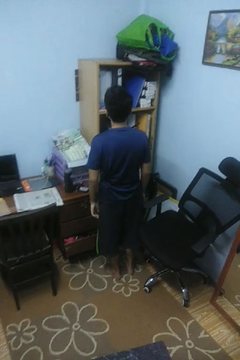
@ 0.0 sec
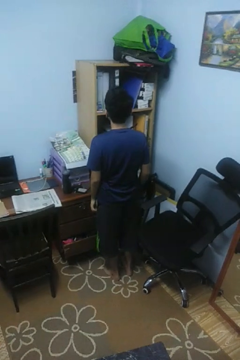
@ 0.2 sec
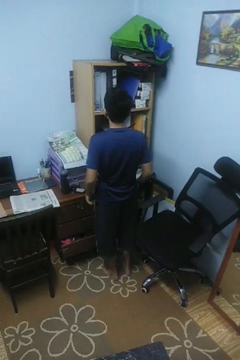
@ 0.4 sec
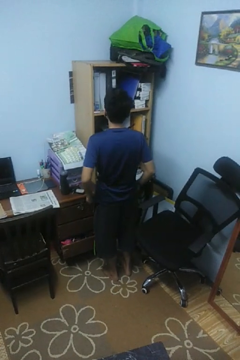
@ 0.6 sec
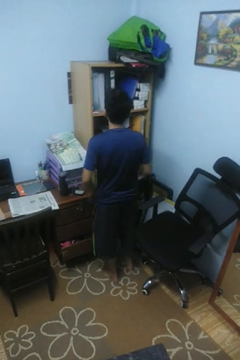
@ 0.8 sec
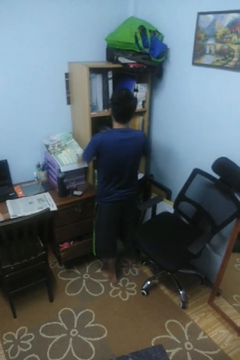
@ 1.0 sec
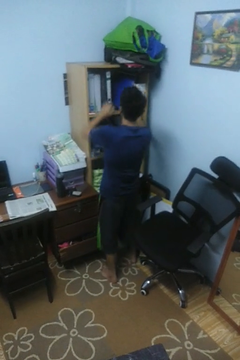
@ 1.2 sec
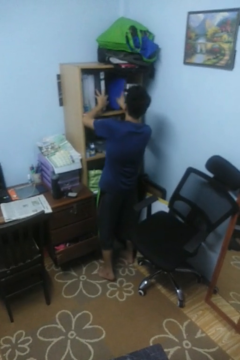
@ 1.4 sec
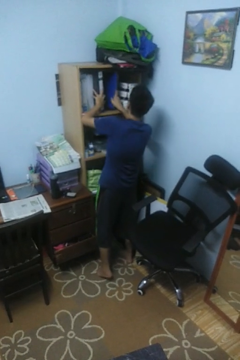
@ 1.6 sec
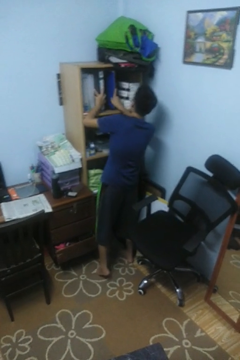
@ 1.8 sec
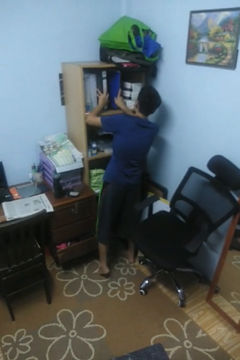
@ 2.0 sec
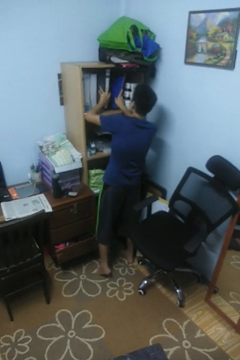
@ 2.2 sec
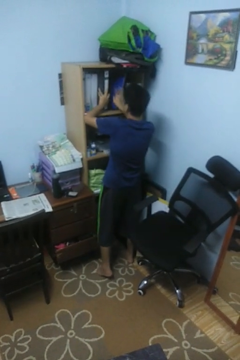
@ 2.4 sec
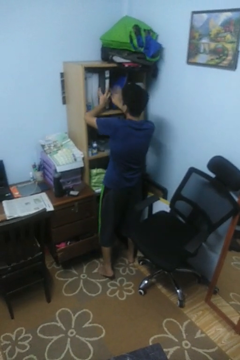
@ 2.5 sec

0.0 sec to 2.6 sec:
person searches in cabinet

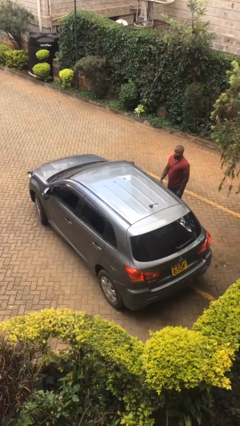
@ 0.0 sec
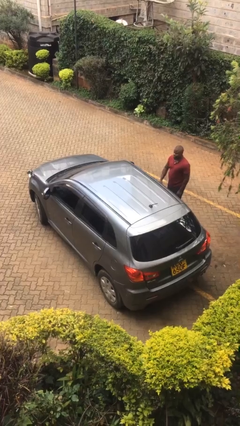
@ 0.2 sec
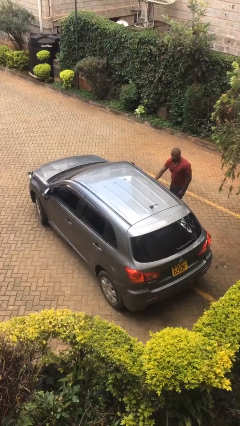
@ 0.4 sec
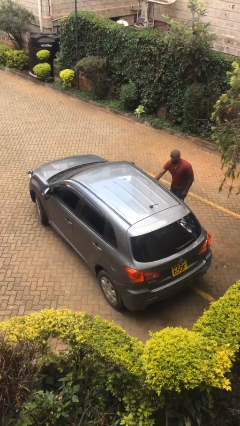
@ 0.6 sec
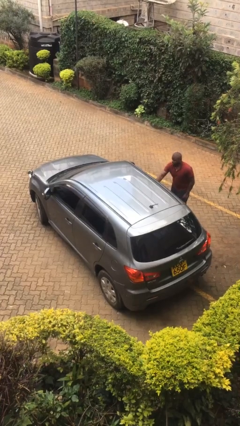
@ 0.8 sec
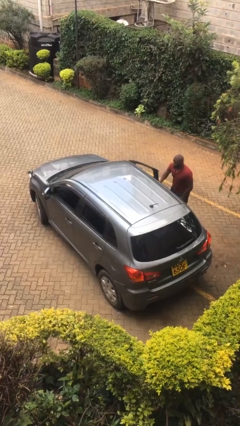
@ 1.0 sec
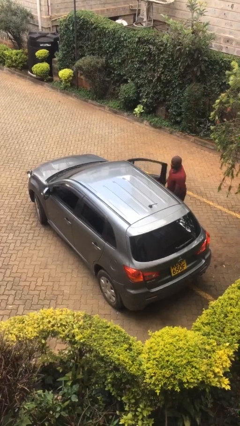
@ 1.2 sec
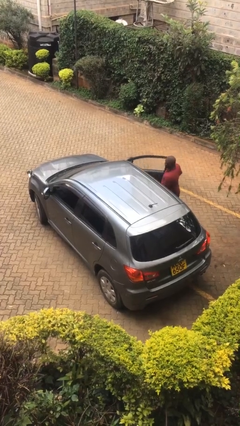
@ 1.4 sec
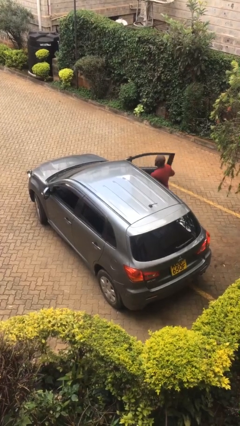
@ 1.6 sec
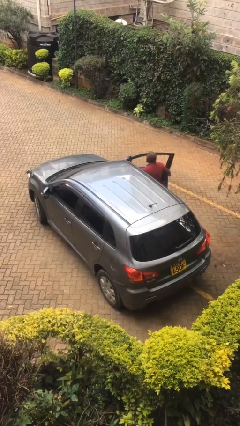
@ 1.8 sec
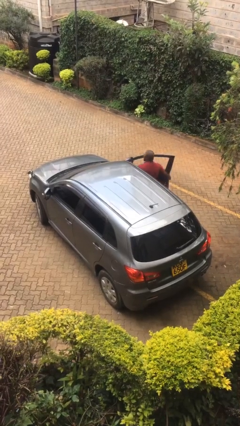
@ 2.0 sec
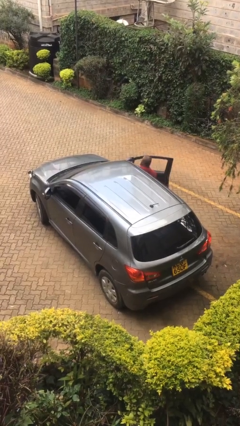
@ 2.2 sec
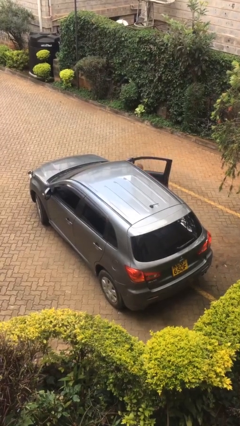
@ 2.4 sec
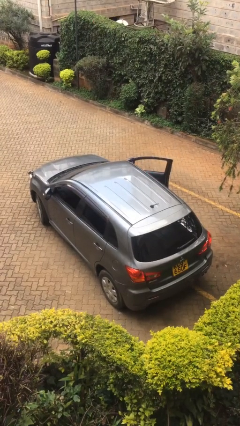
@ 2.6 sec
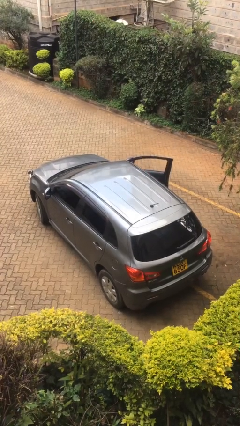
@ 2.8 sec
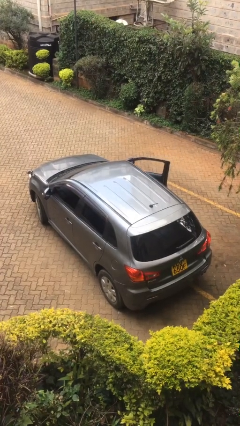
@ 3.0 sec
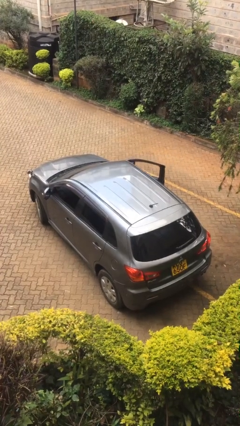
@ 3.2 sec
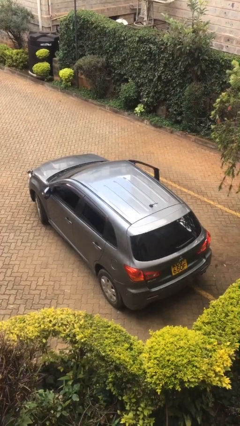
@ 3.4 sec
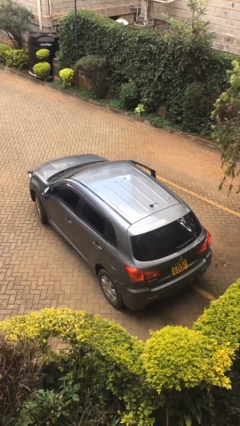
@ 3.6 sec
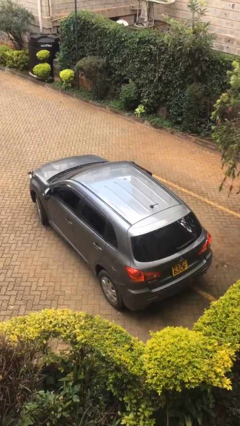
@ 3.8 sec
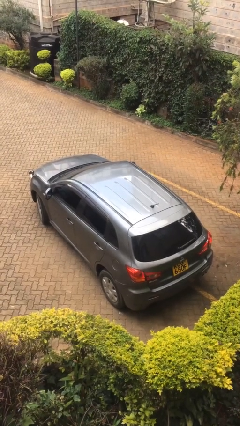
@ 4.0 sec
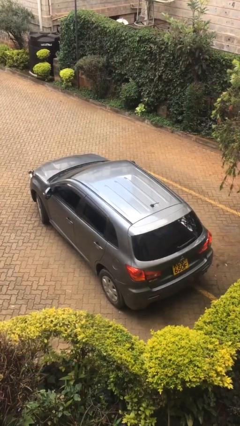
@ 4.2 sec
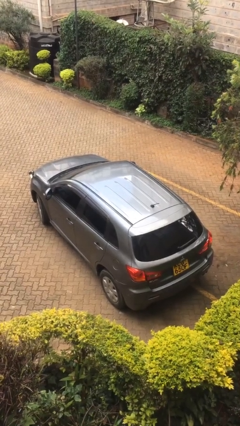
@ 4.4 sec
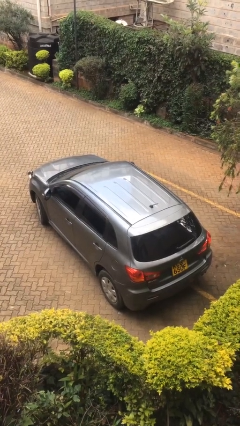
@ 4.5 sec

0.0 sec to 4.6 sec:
car picks up person

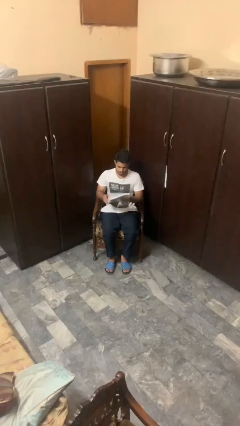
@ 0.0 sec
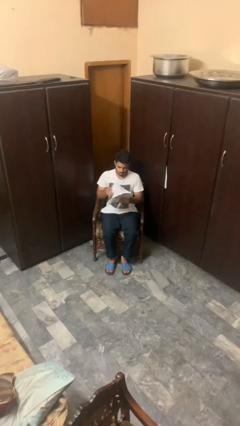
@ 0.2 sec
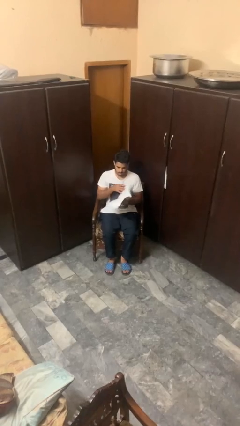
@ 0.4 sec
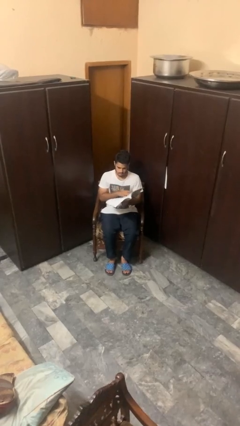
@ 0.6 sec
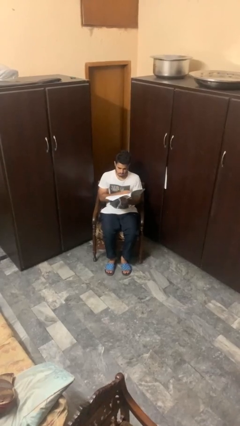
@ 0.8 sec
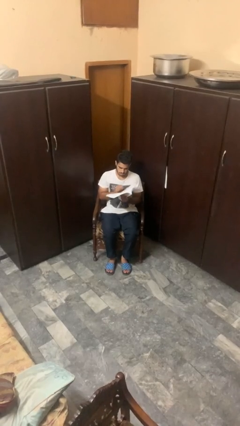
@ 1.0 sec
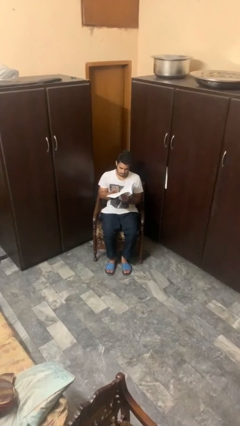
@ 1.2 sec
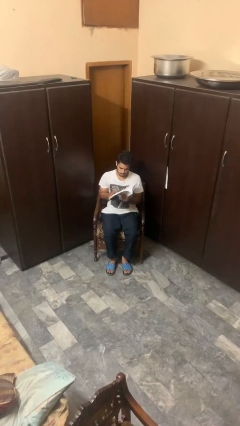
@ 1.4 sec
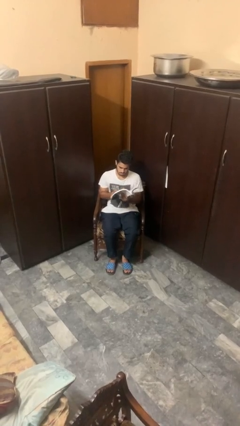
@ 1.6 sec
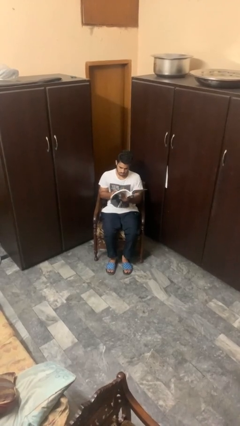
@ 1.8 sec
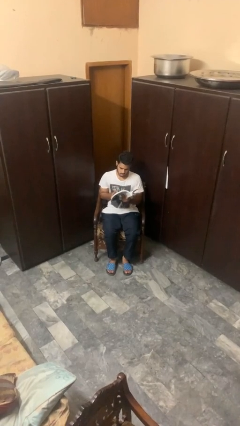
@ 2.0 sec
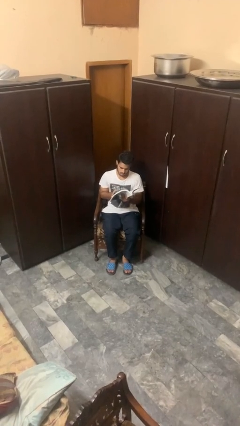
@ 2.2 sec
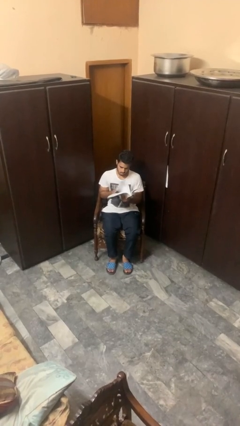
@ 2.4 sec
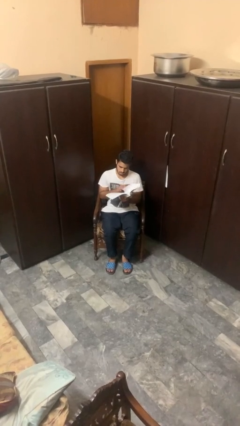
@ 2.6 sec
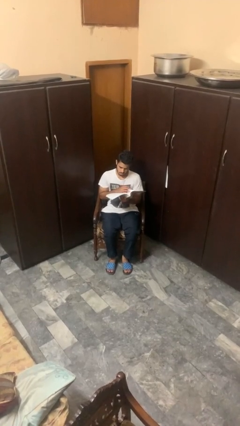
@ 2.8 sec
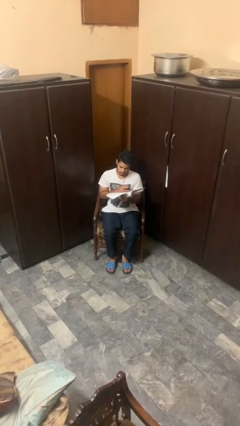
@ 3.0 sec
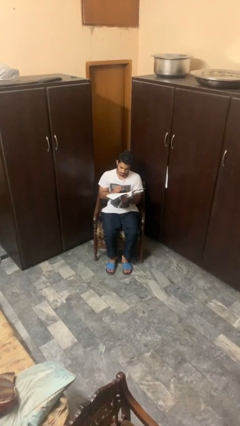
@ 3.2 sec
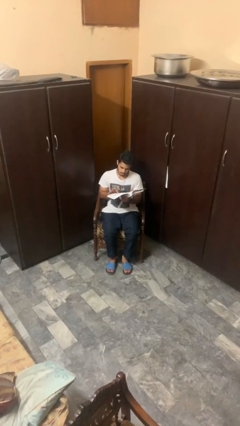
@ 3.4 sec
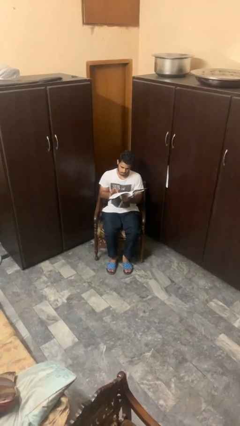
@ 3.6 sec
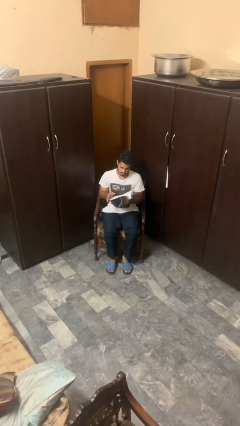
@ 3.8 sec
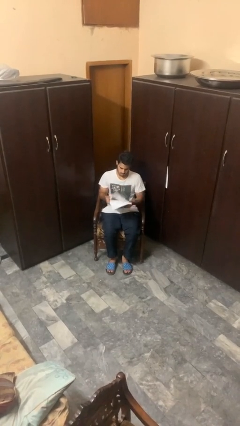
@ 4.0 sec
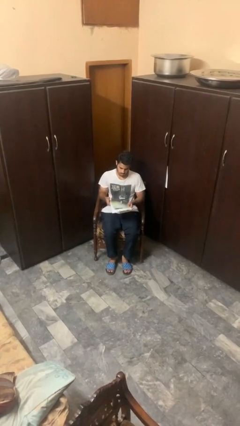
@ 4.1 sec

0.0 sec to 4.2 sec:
person reads book

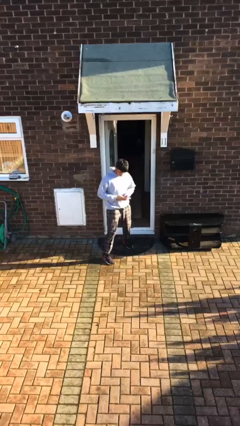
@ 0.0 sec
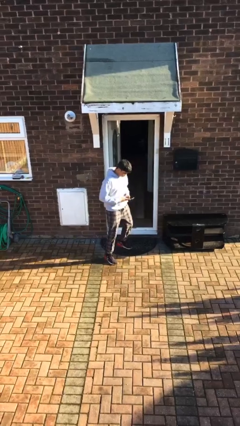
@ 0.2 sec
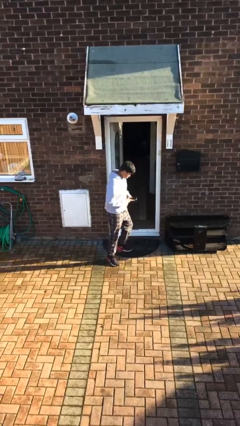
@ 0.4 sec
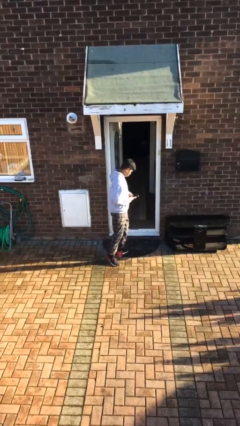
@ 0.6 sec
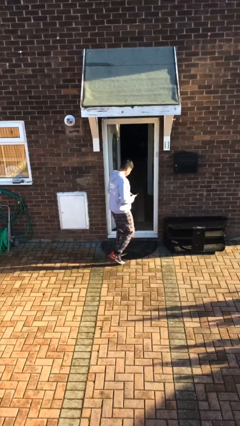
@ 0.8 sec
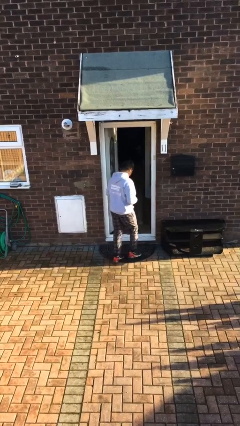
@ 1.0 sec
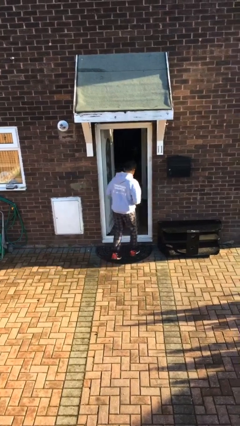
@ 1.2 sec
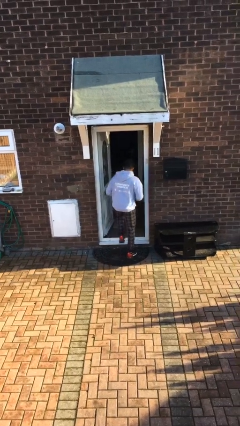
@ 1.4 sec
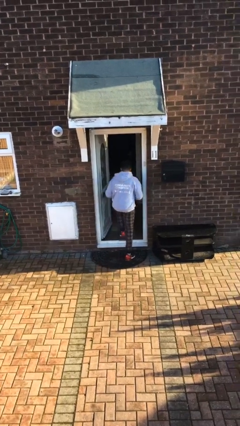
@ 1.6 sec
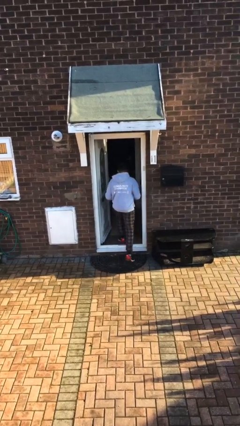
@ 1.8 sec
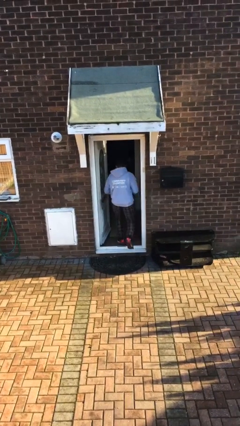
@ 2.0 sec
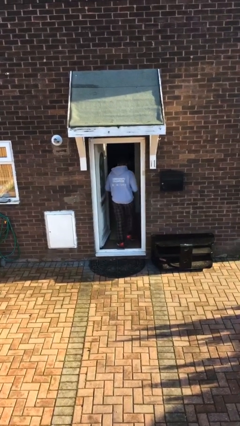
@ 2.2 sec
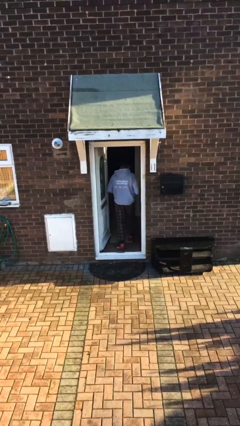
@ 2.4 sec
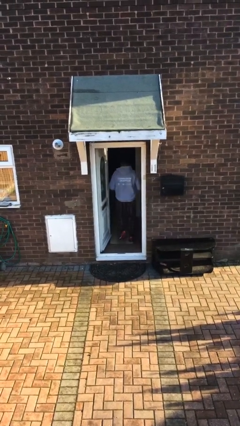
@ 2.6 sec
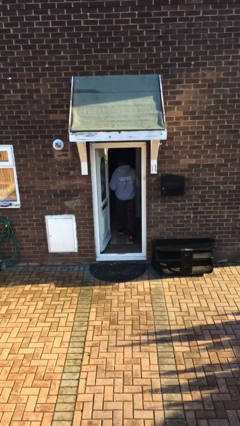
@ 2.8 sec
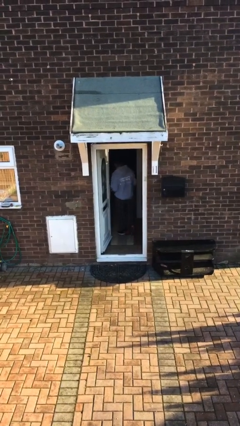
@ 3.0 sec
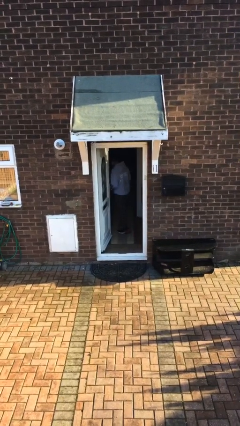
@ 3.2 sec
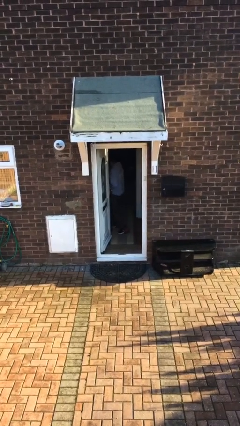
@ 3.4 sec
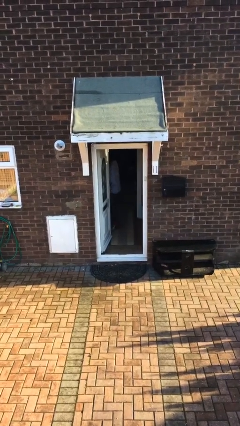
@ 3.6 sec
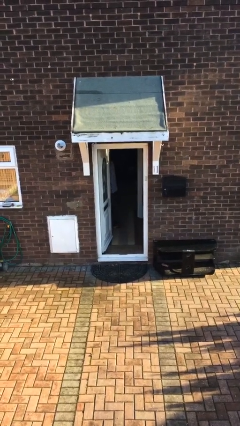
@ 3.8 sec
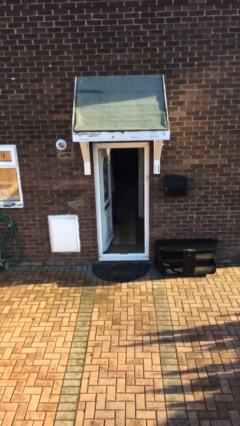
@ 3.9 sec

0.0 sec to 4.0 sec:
person exits scene through structure

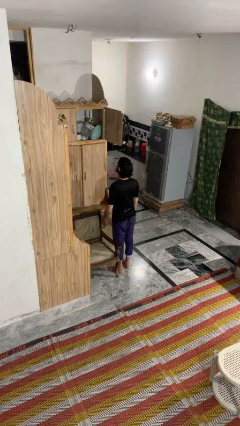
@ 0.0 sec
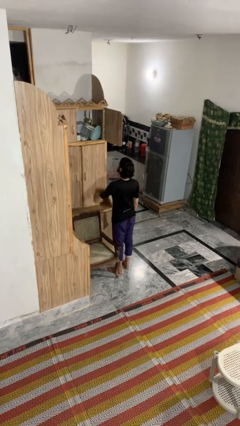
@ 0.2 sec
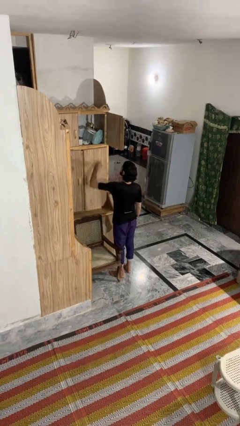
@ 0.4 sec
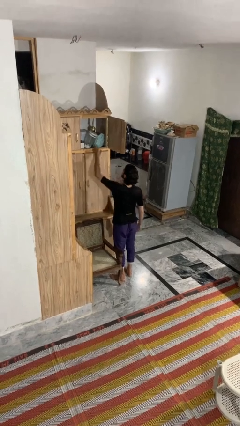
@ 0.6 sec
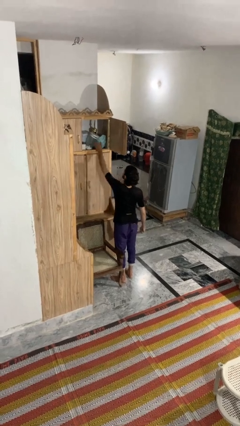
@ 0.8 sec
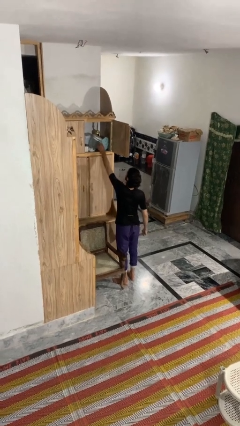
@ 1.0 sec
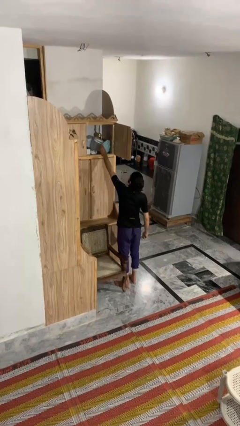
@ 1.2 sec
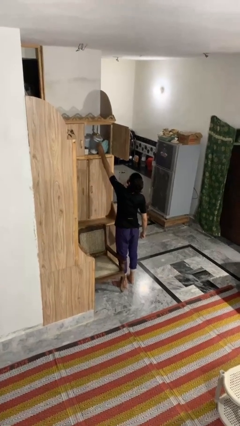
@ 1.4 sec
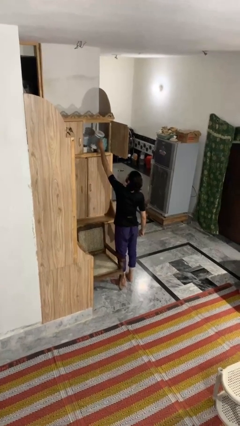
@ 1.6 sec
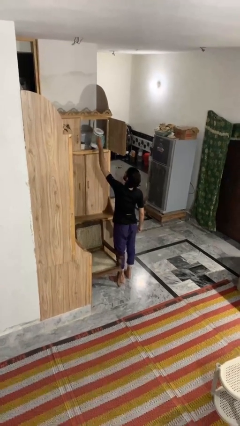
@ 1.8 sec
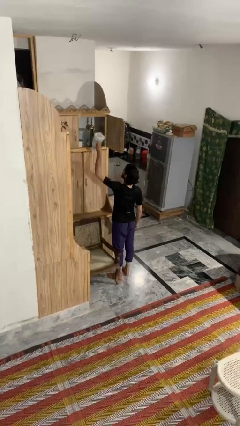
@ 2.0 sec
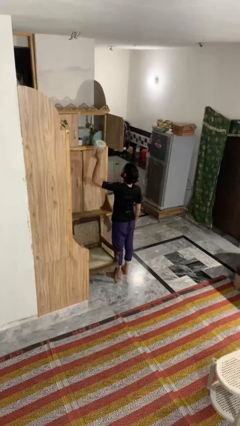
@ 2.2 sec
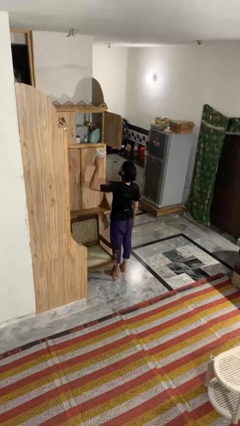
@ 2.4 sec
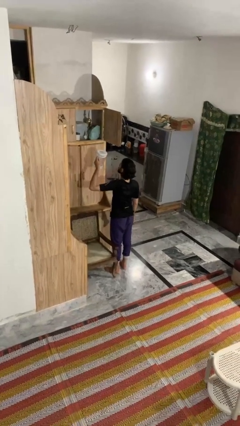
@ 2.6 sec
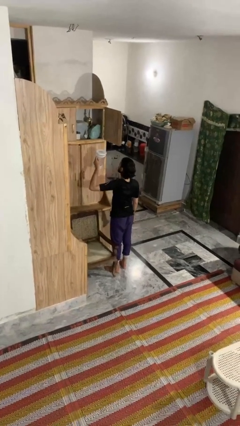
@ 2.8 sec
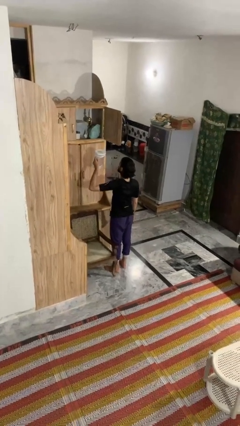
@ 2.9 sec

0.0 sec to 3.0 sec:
person picks up object from shelf
